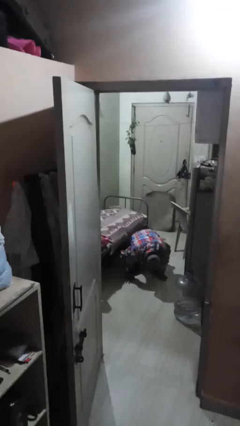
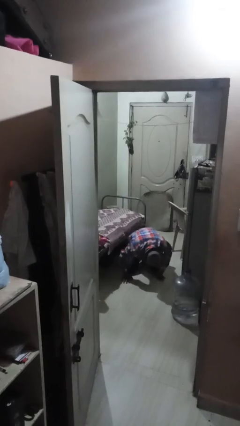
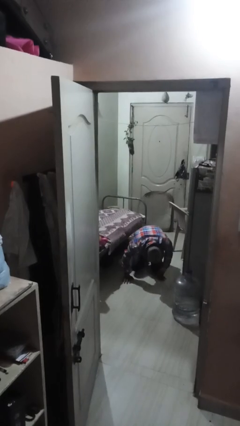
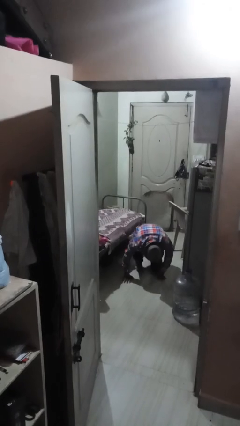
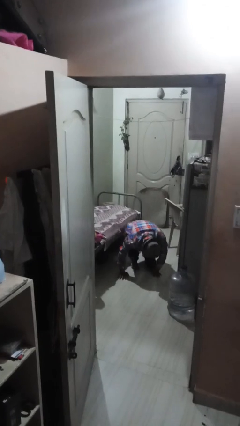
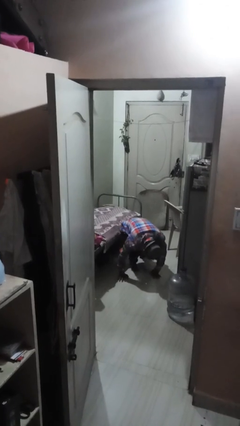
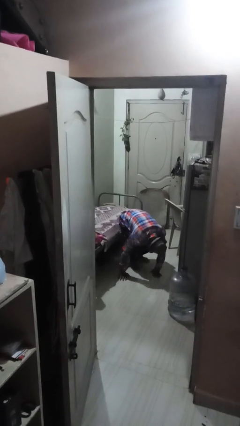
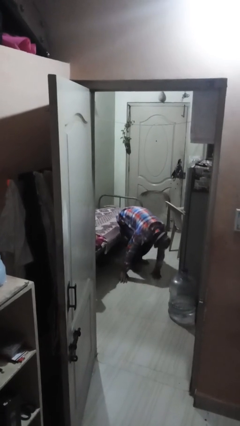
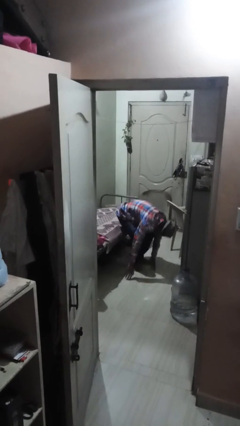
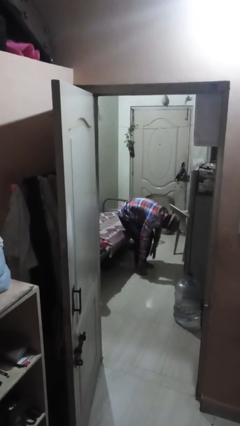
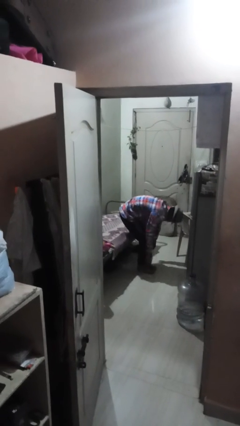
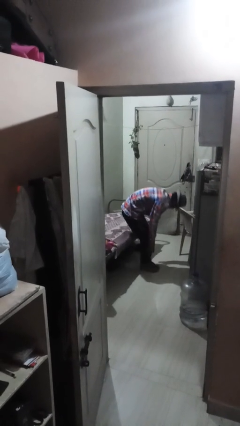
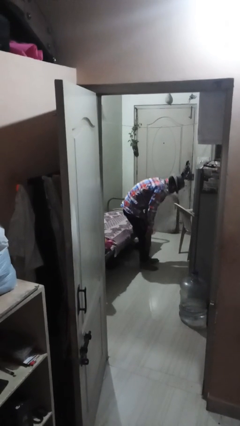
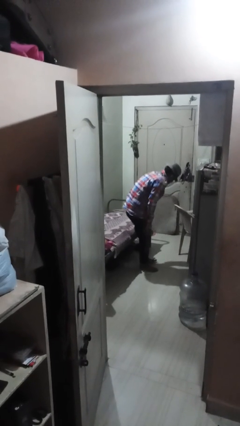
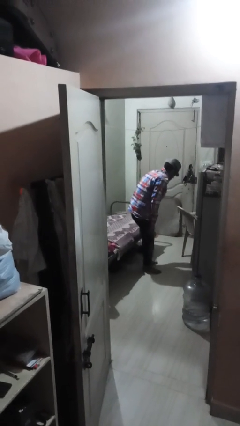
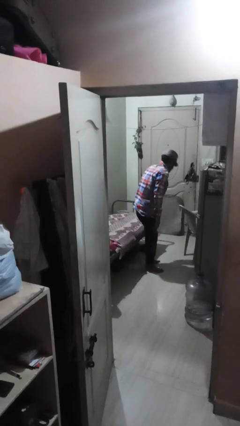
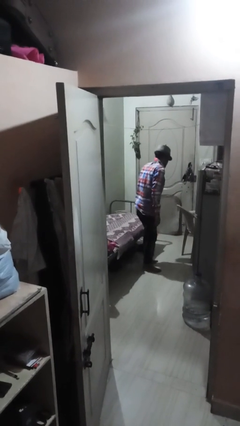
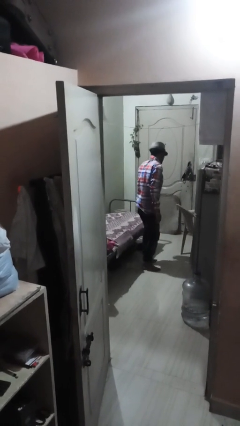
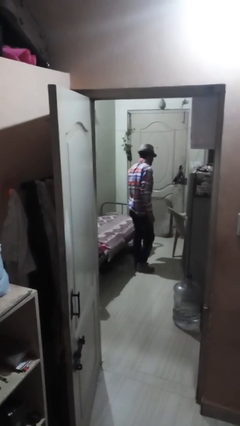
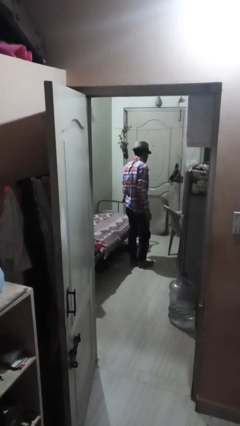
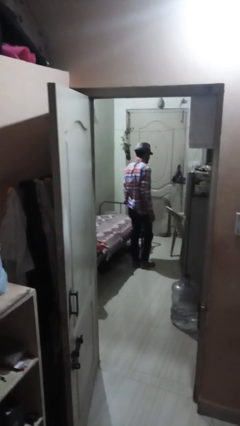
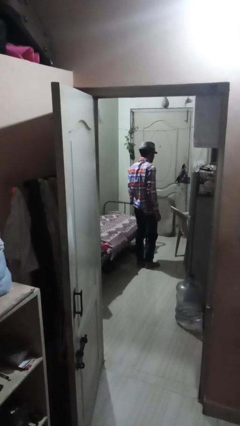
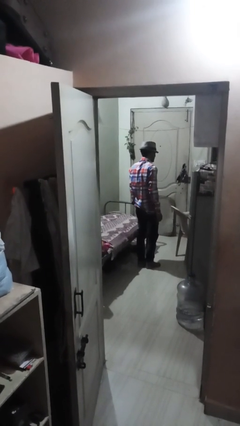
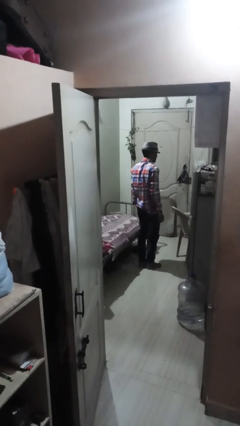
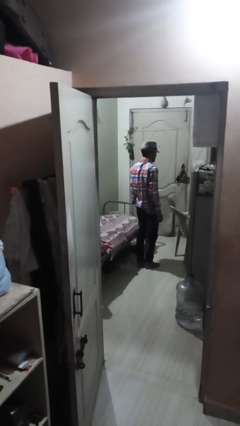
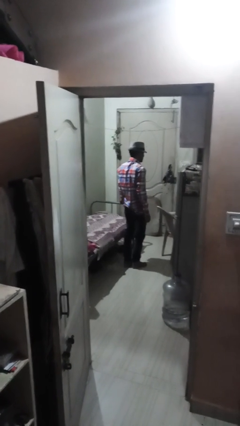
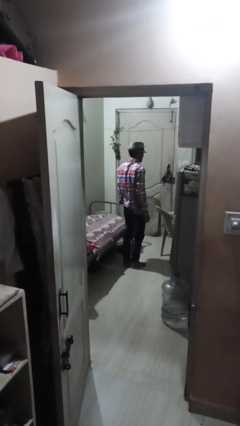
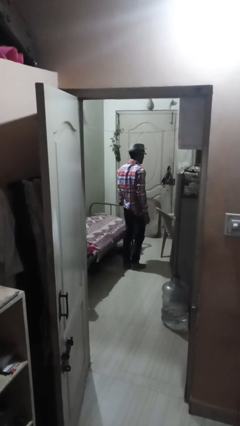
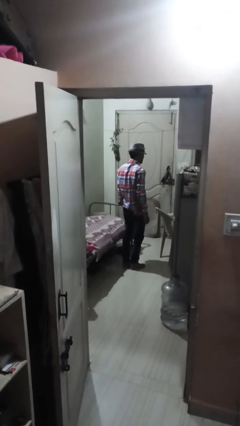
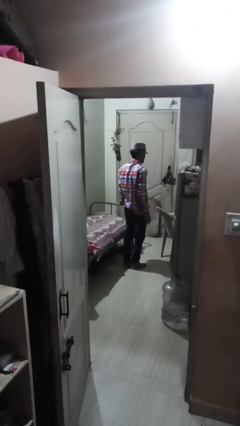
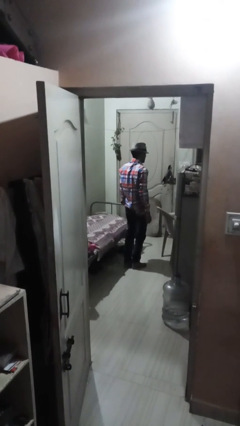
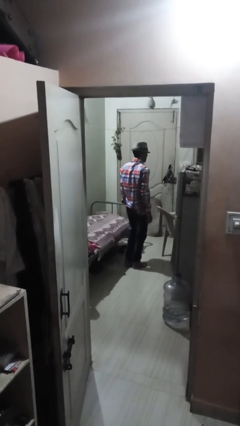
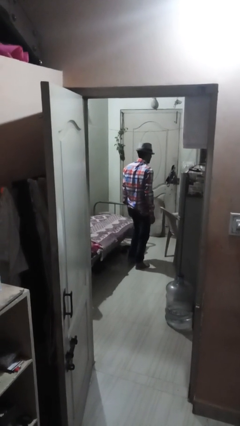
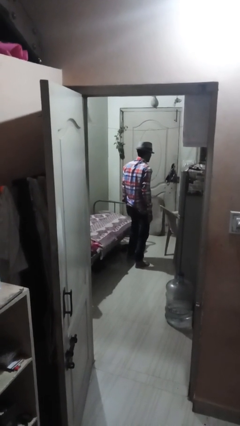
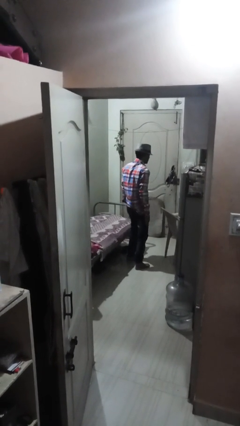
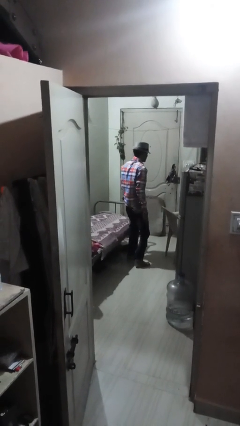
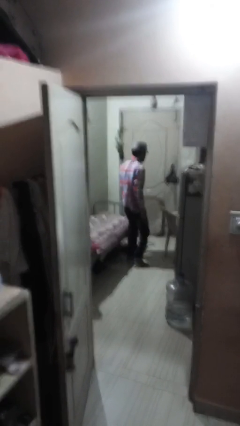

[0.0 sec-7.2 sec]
person stands up from floor

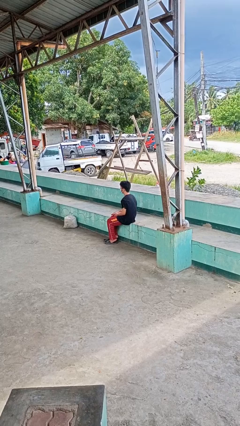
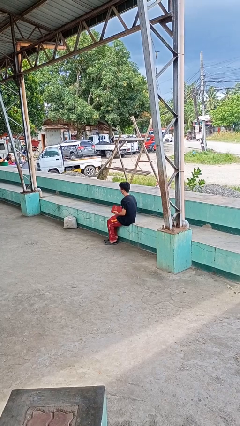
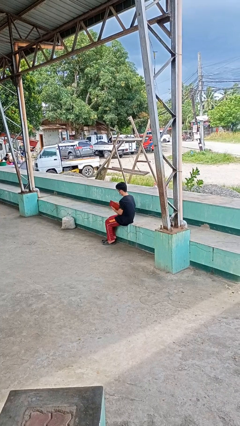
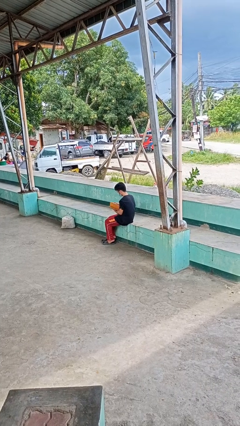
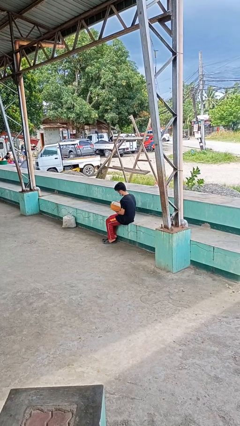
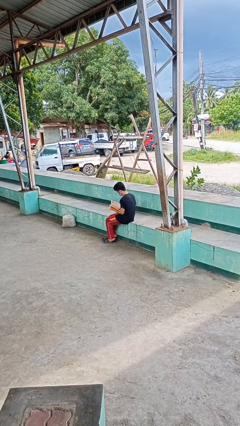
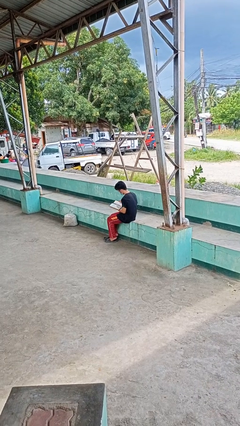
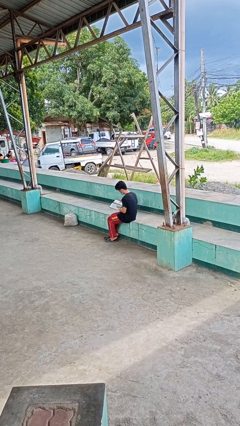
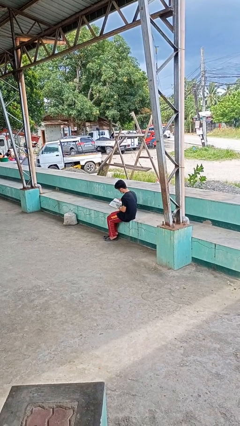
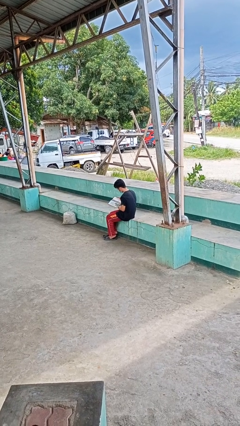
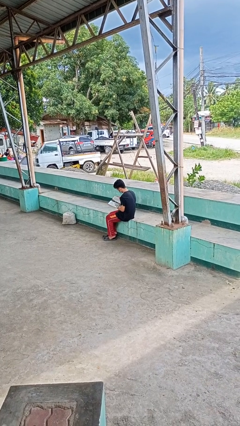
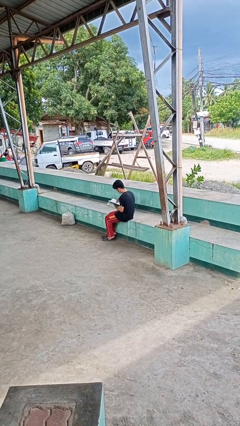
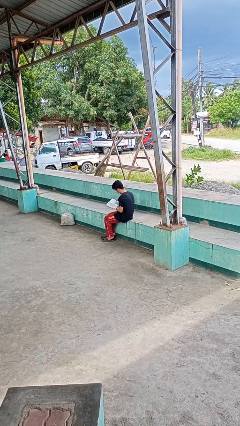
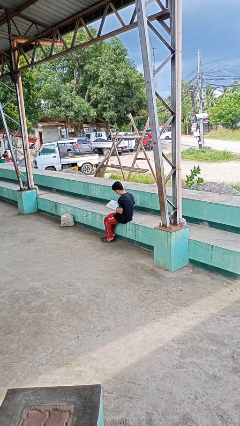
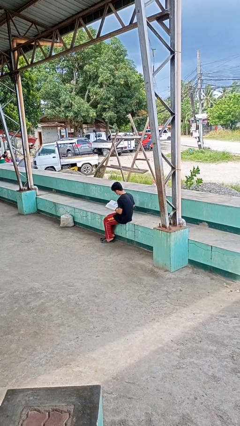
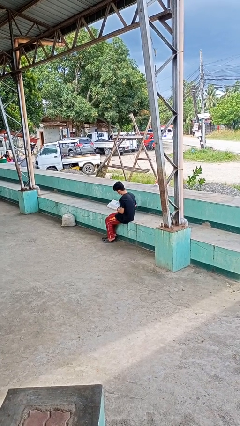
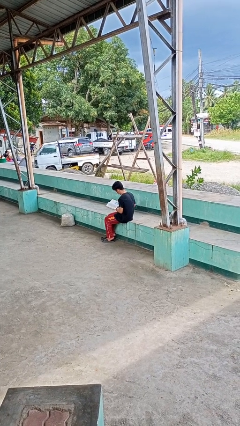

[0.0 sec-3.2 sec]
person reads book

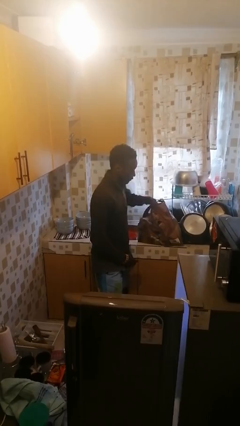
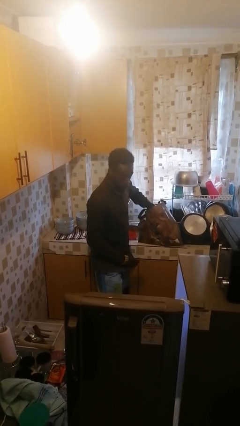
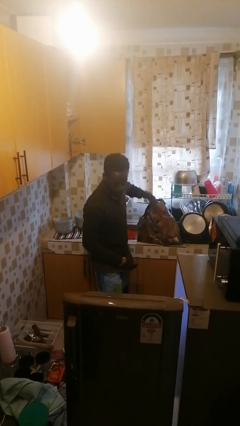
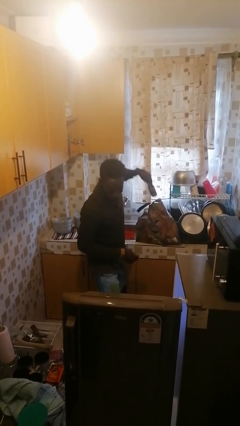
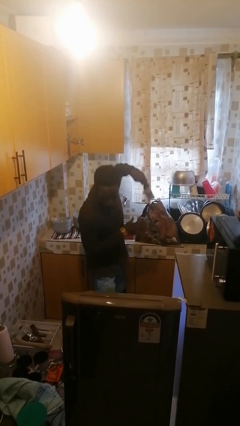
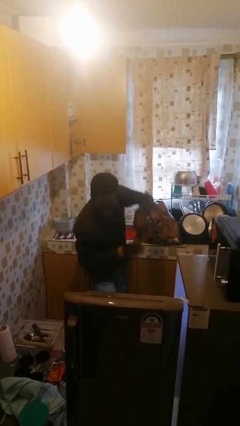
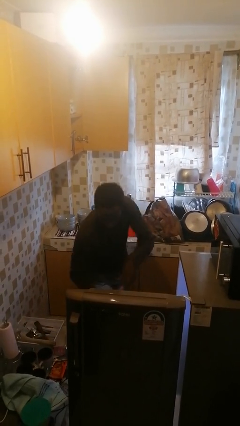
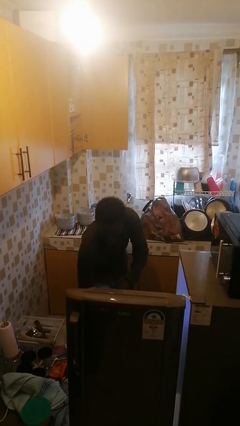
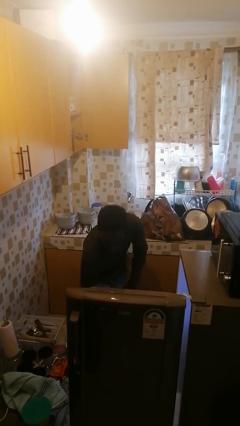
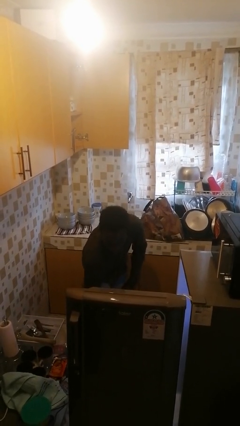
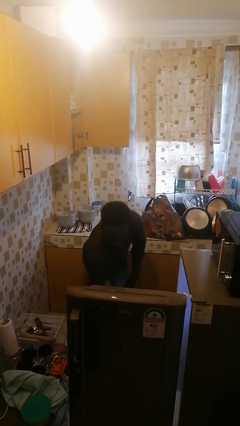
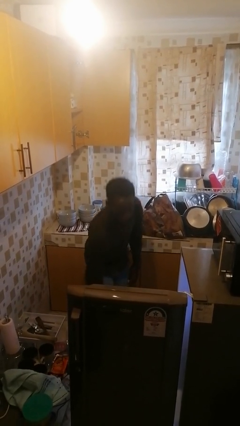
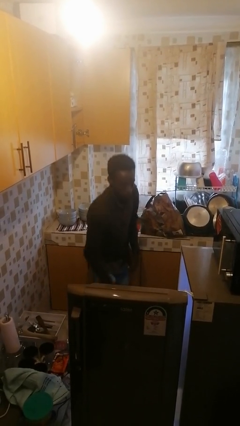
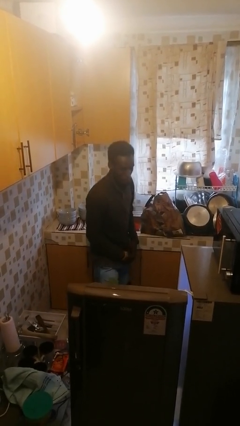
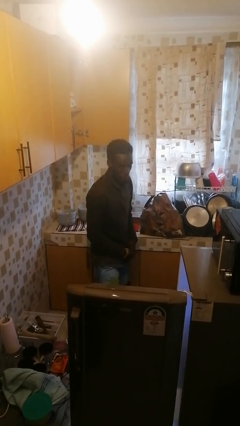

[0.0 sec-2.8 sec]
person loads groceries into refrigerator

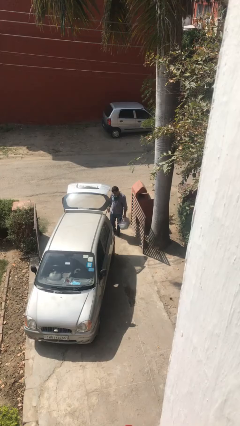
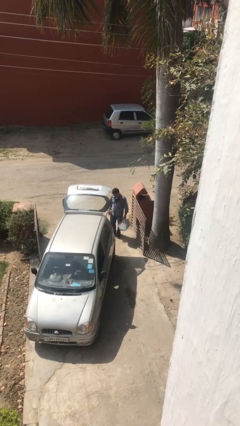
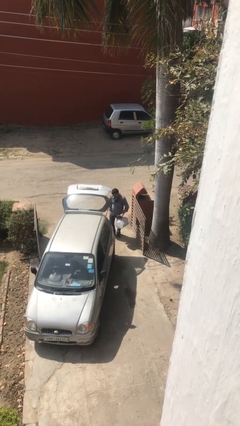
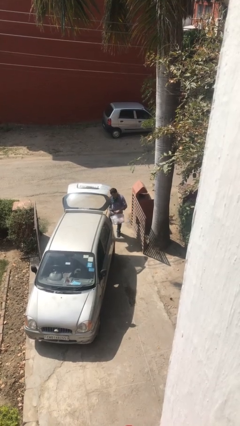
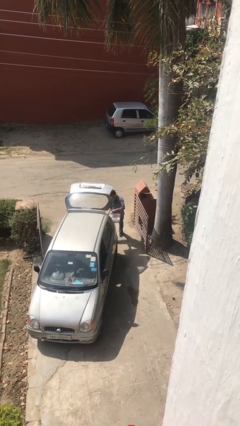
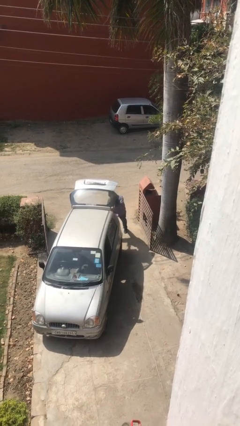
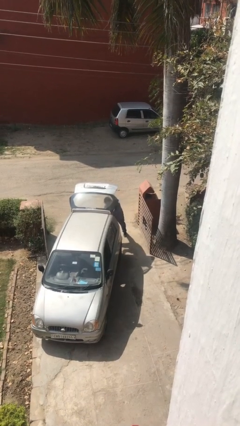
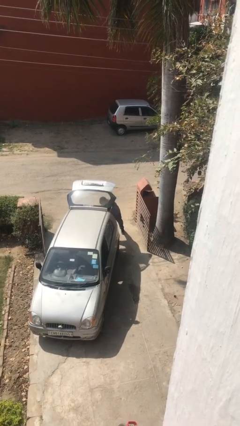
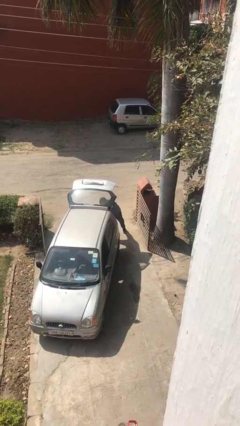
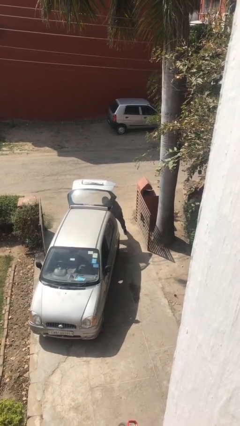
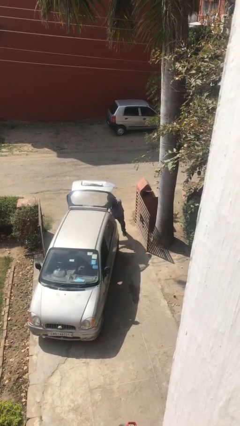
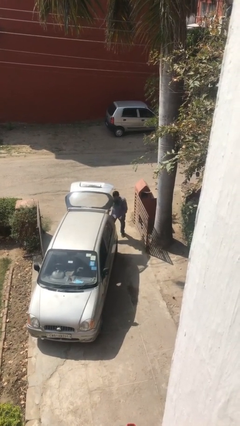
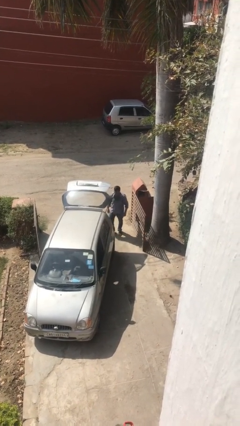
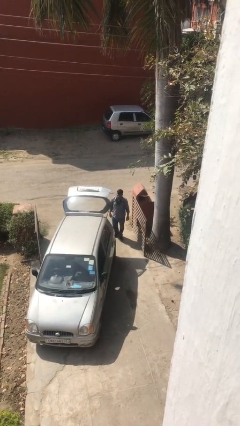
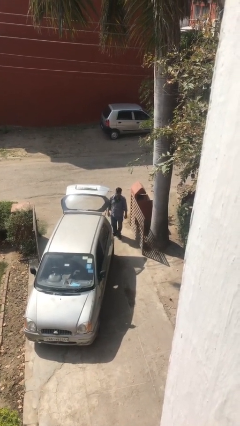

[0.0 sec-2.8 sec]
person loads car

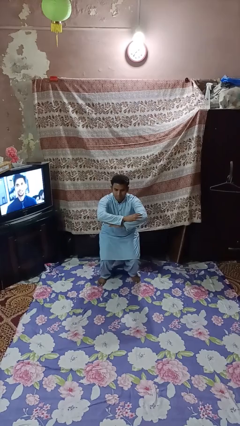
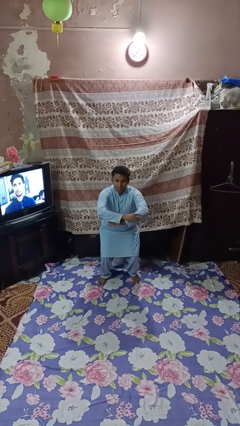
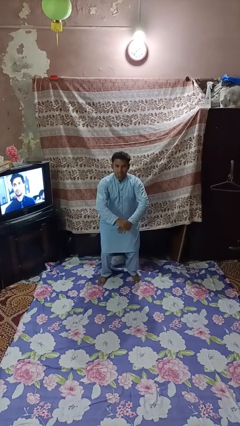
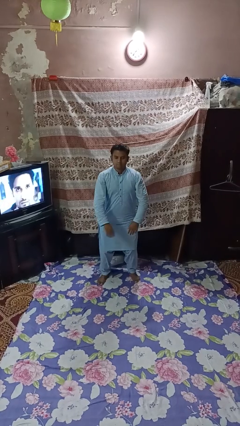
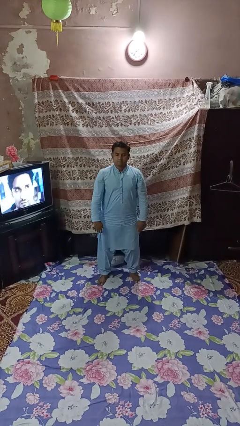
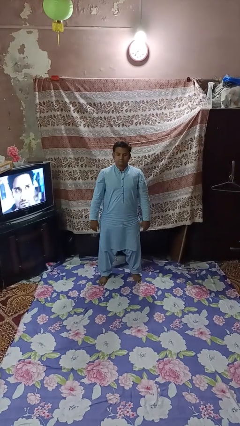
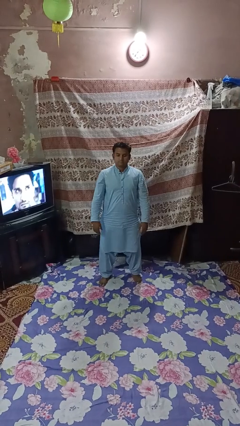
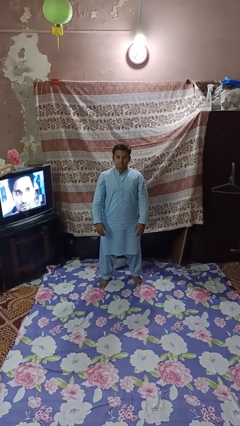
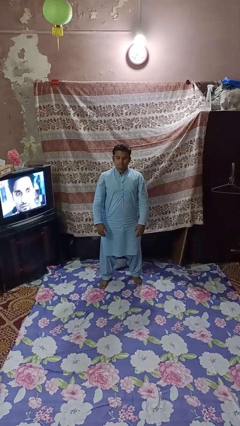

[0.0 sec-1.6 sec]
person stands up

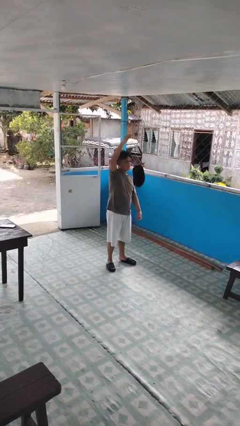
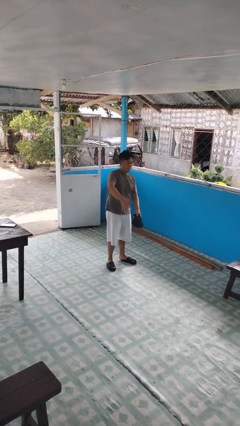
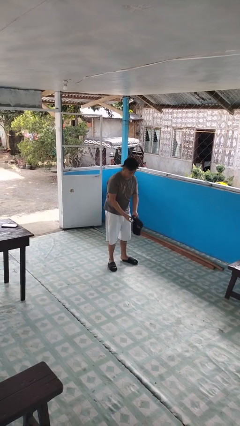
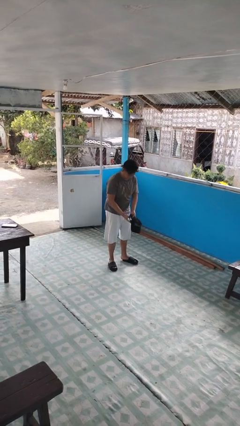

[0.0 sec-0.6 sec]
person catches dropped object
